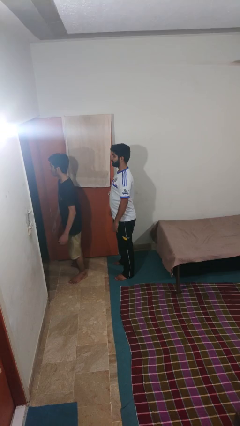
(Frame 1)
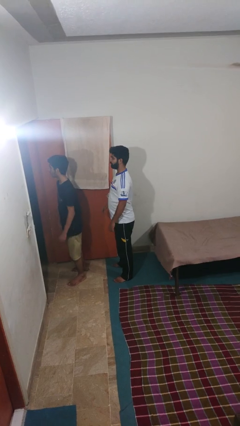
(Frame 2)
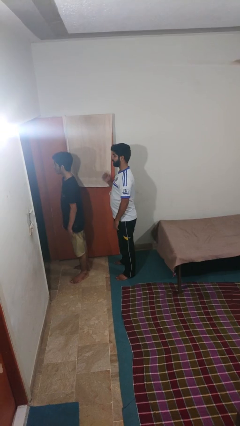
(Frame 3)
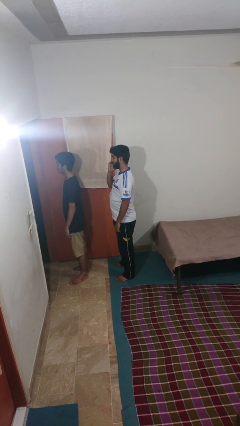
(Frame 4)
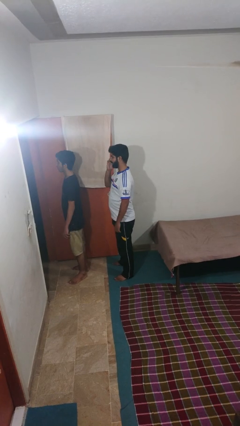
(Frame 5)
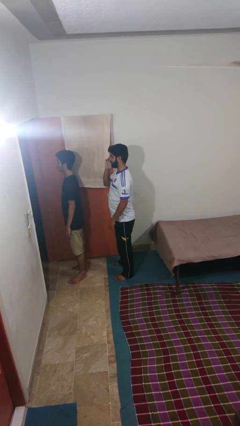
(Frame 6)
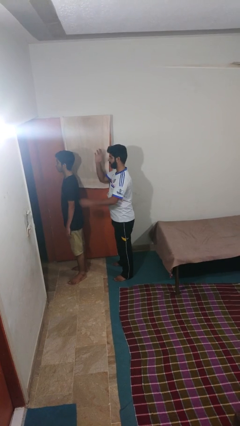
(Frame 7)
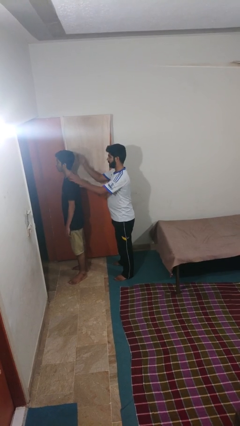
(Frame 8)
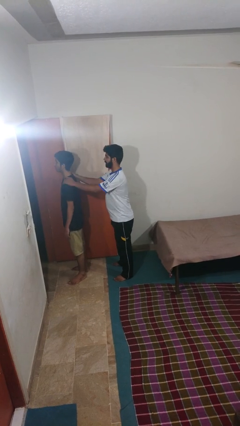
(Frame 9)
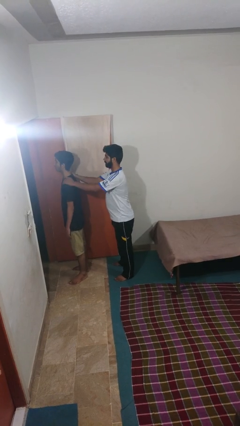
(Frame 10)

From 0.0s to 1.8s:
person grabs person by shoulder

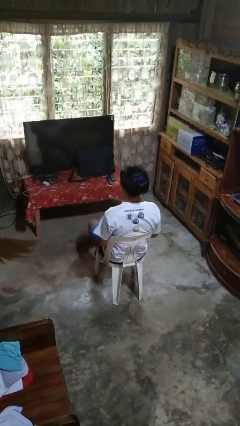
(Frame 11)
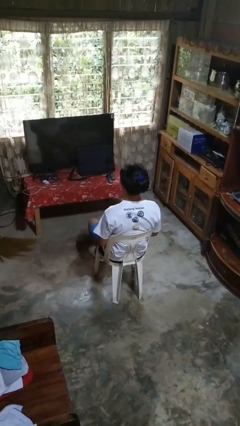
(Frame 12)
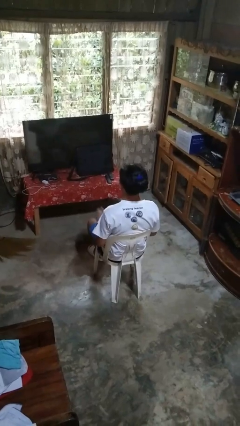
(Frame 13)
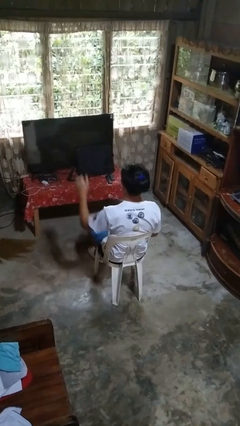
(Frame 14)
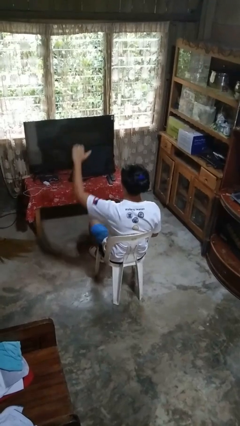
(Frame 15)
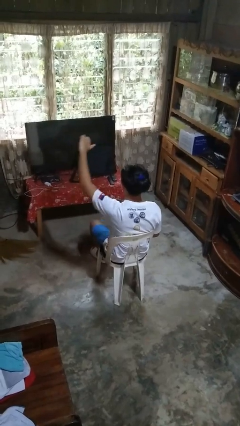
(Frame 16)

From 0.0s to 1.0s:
person gestures thumbs down

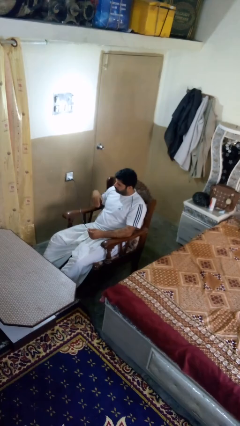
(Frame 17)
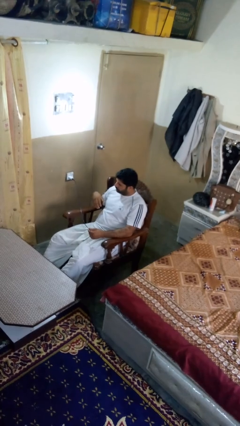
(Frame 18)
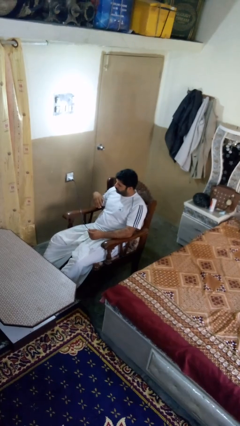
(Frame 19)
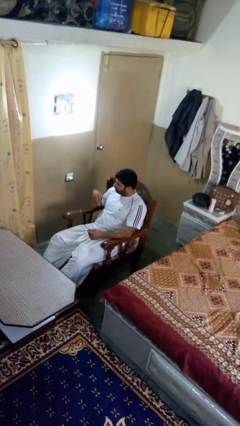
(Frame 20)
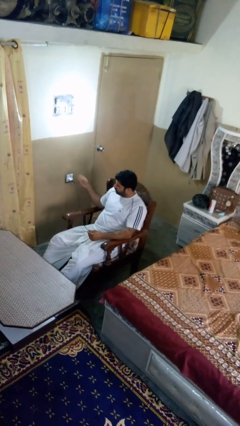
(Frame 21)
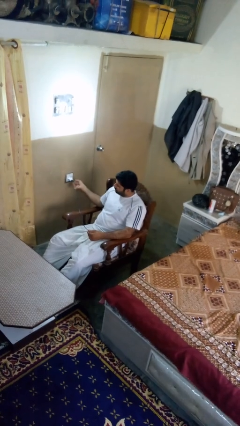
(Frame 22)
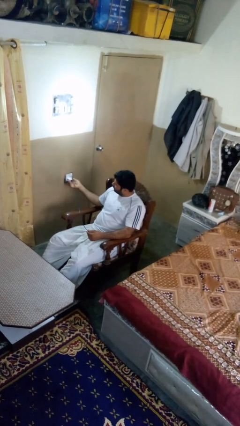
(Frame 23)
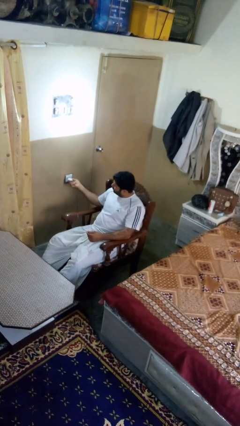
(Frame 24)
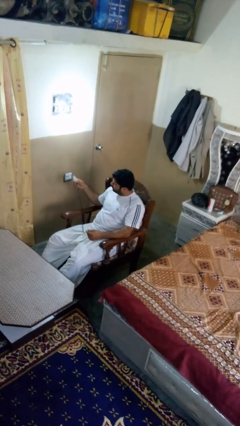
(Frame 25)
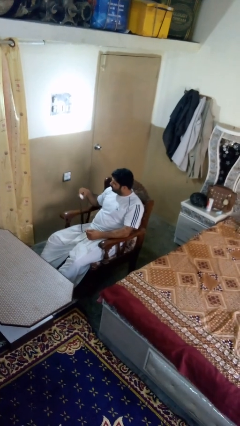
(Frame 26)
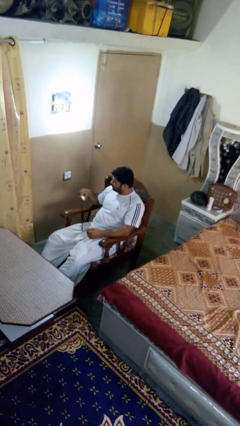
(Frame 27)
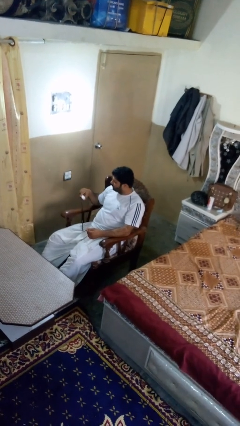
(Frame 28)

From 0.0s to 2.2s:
person unplugs from electrical socket

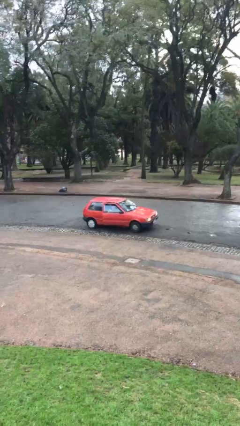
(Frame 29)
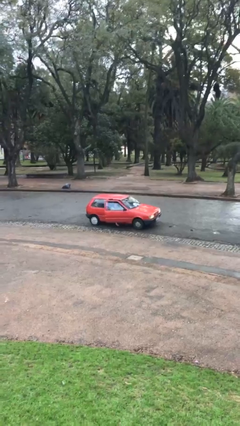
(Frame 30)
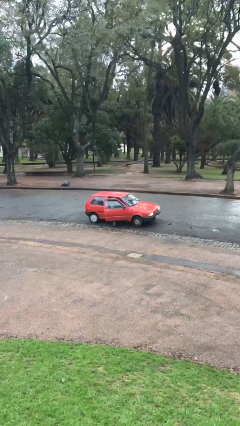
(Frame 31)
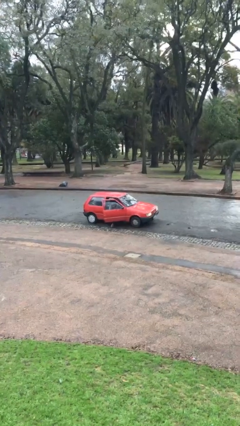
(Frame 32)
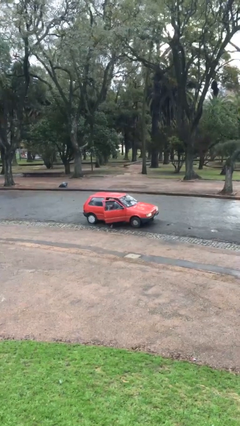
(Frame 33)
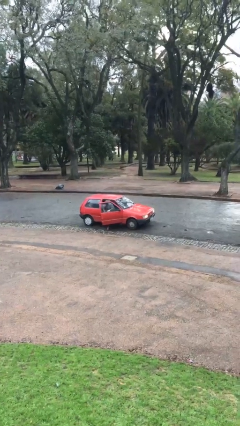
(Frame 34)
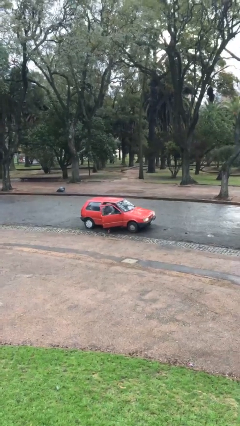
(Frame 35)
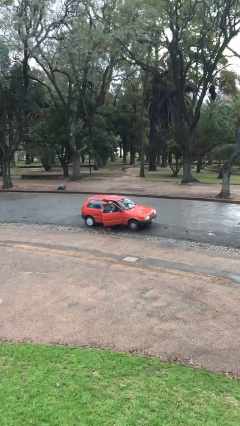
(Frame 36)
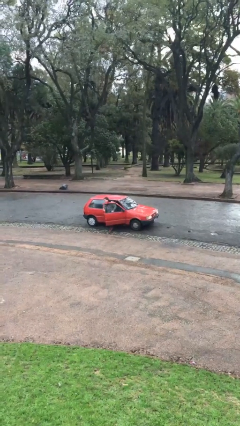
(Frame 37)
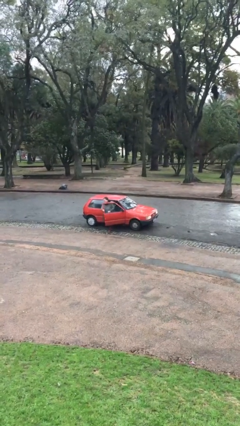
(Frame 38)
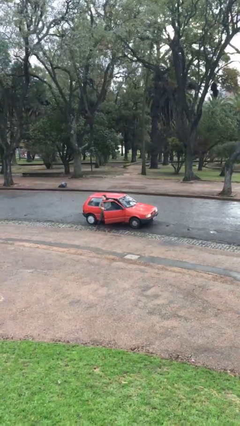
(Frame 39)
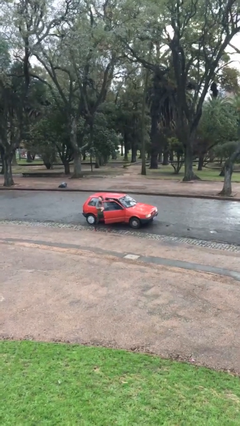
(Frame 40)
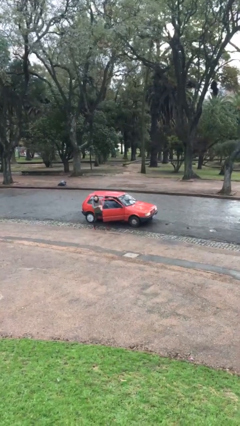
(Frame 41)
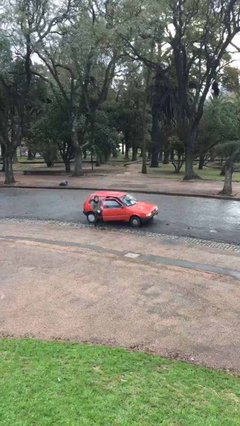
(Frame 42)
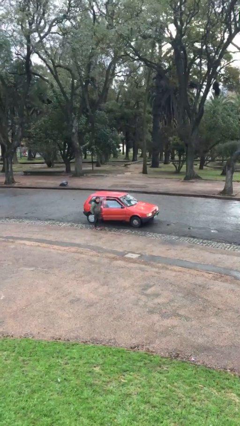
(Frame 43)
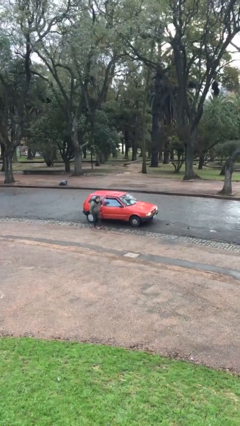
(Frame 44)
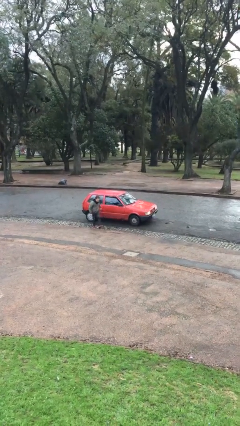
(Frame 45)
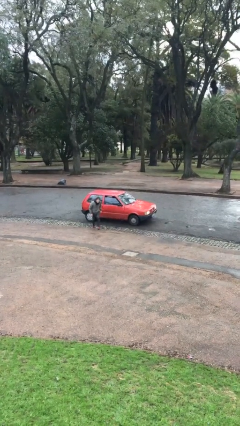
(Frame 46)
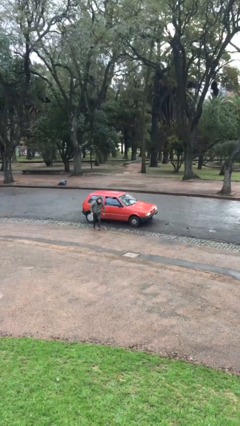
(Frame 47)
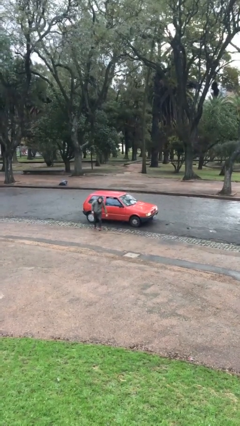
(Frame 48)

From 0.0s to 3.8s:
car drops off person

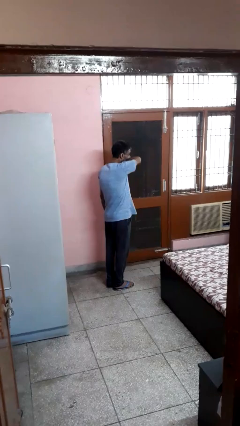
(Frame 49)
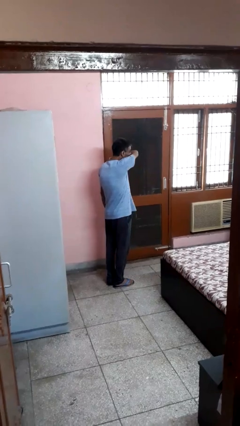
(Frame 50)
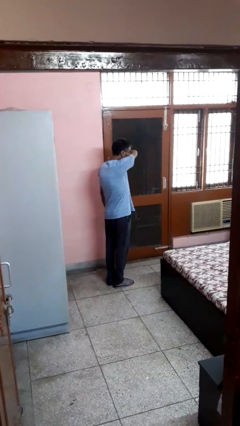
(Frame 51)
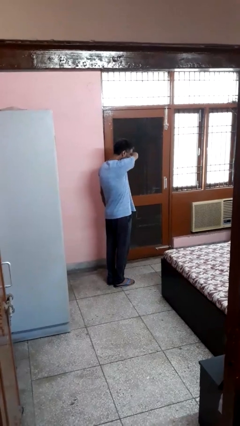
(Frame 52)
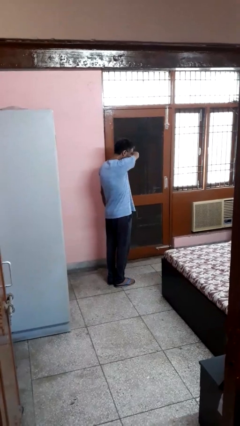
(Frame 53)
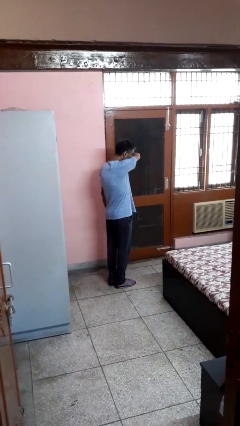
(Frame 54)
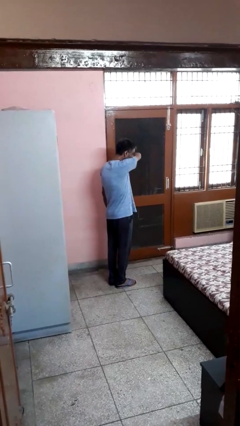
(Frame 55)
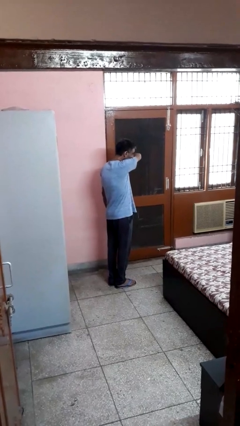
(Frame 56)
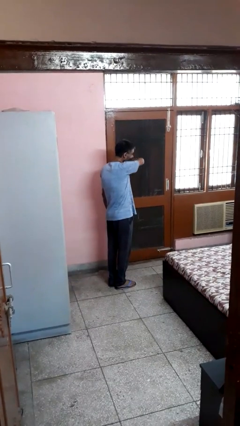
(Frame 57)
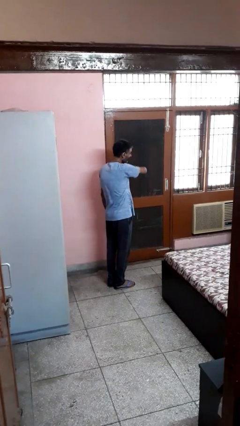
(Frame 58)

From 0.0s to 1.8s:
person sneezes into arm

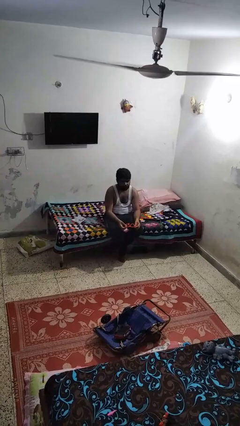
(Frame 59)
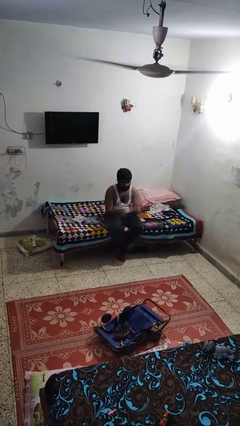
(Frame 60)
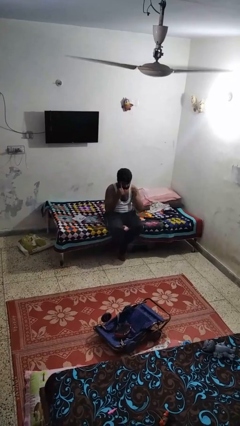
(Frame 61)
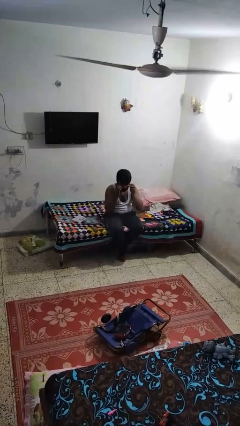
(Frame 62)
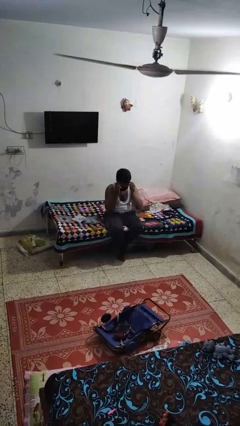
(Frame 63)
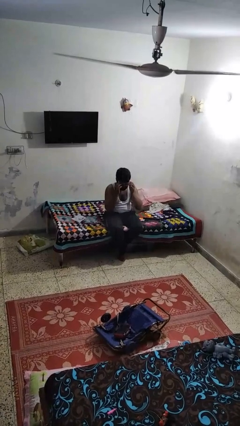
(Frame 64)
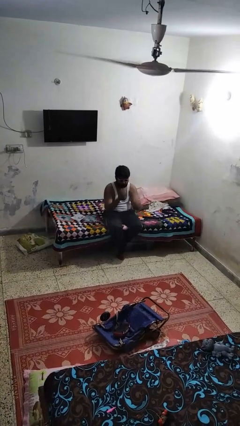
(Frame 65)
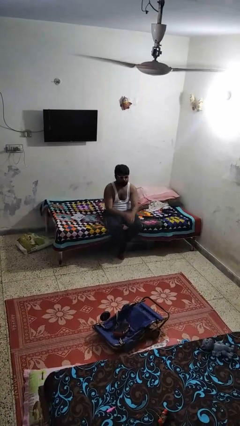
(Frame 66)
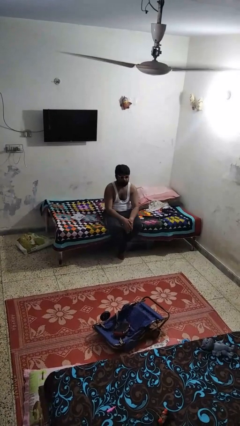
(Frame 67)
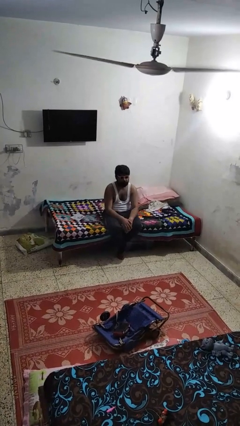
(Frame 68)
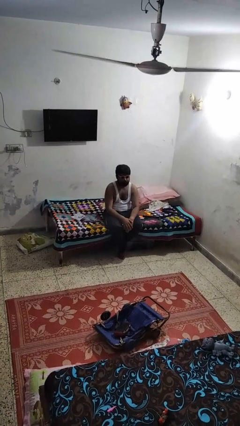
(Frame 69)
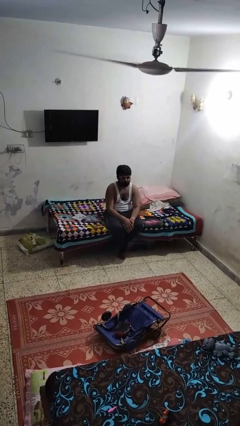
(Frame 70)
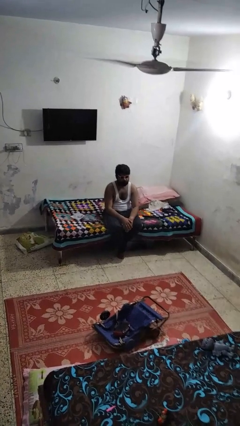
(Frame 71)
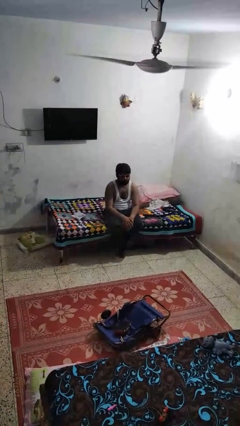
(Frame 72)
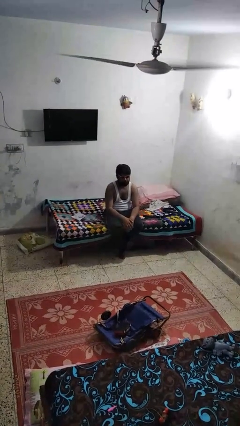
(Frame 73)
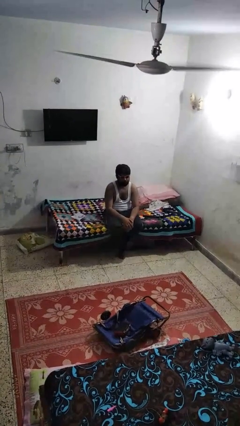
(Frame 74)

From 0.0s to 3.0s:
person puts on sunglasses

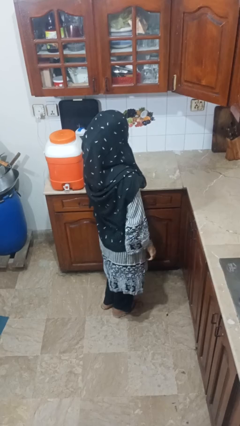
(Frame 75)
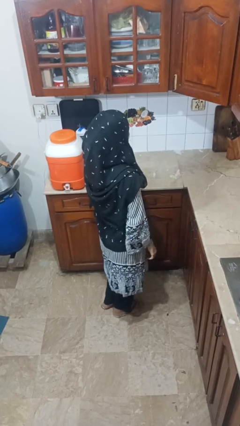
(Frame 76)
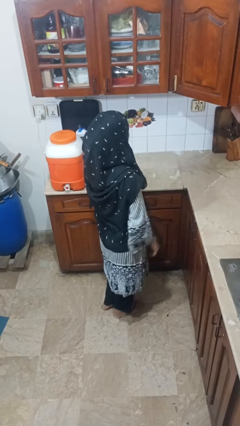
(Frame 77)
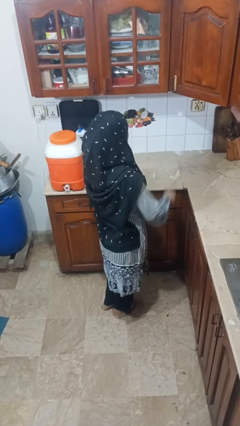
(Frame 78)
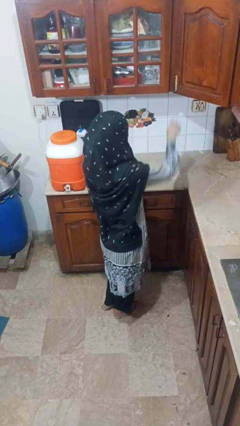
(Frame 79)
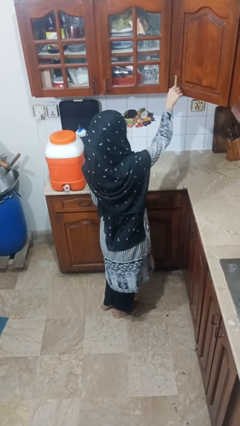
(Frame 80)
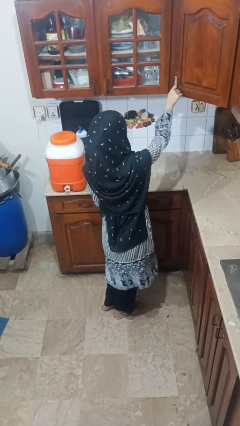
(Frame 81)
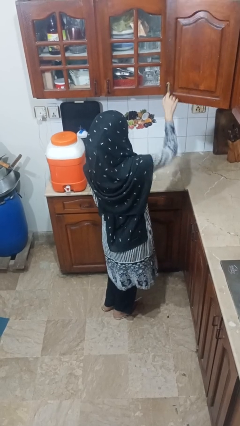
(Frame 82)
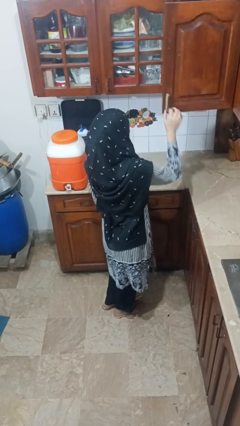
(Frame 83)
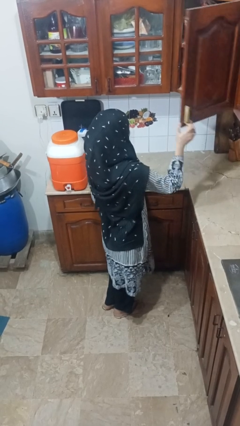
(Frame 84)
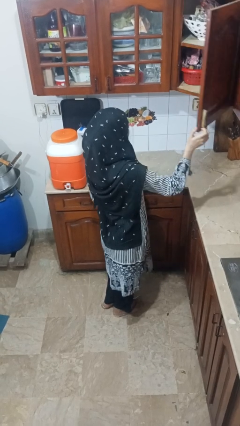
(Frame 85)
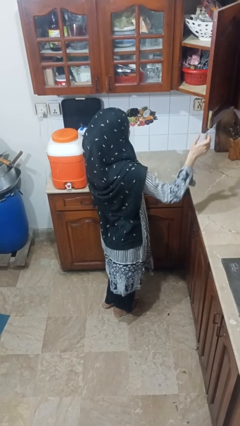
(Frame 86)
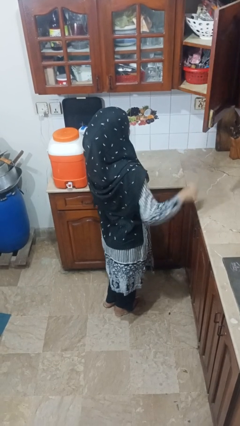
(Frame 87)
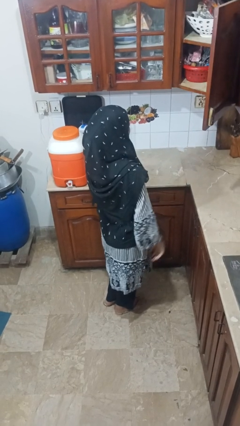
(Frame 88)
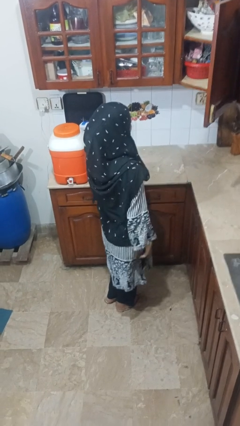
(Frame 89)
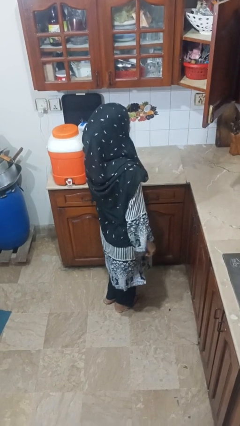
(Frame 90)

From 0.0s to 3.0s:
person opens cabinet

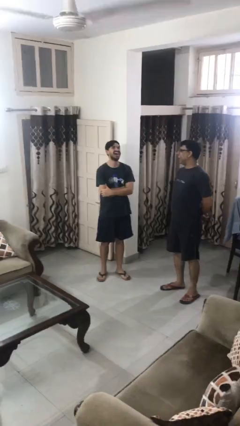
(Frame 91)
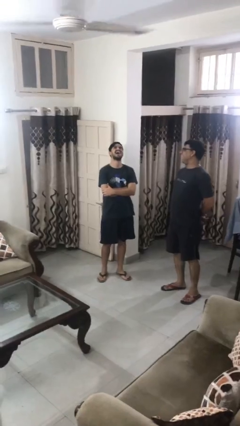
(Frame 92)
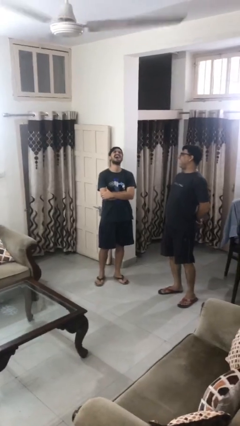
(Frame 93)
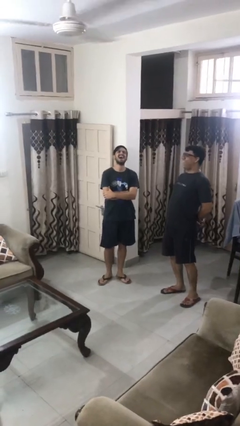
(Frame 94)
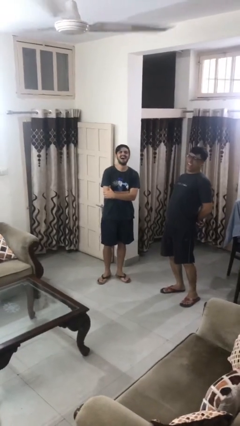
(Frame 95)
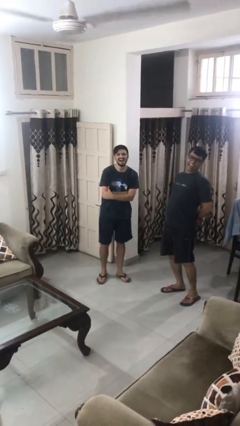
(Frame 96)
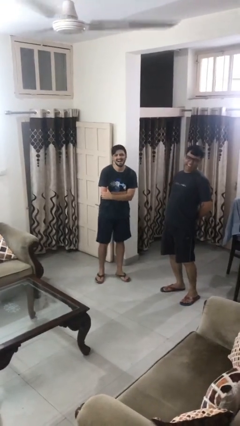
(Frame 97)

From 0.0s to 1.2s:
person laughs with person
